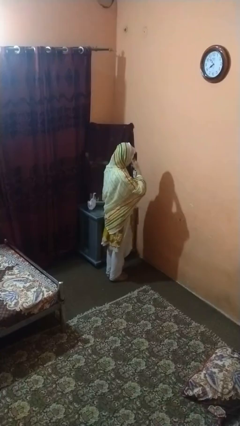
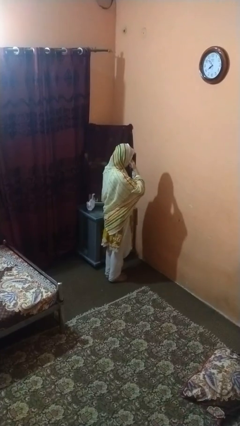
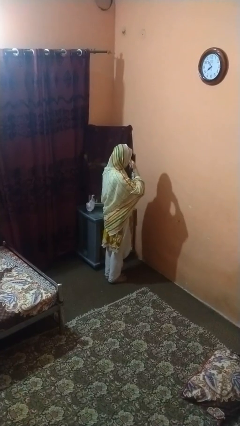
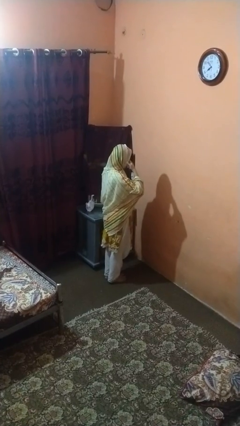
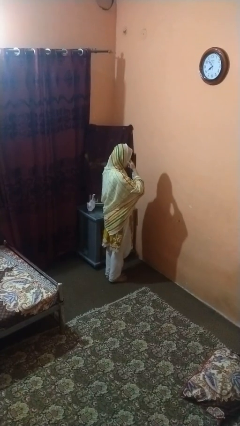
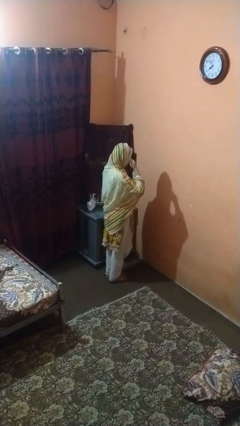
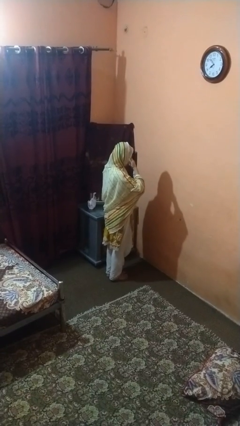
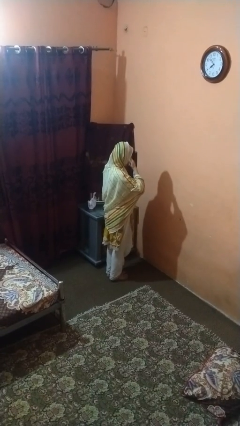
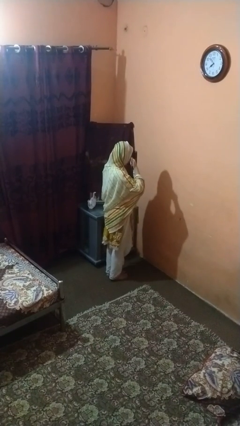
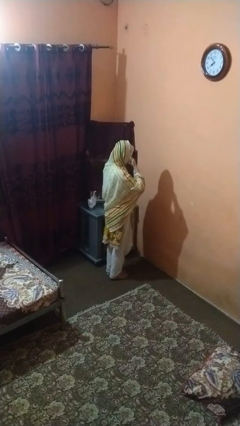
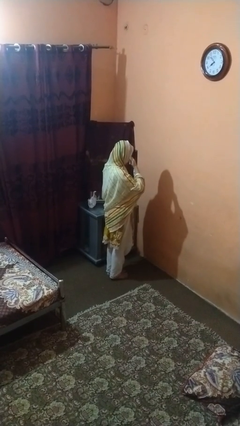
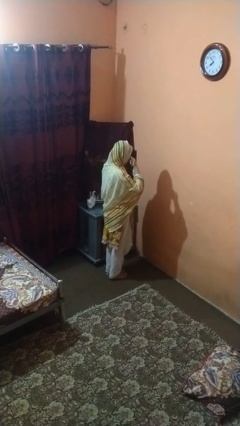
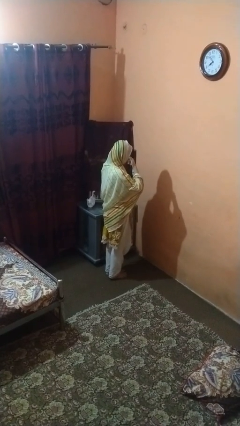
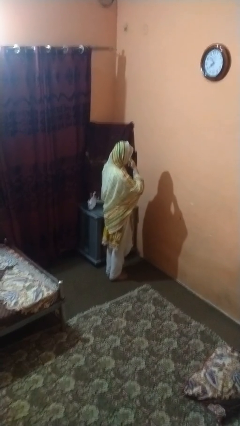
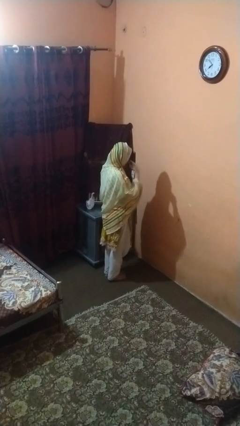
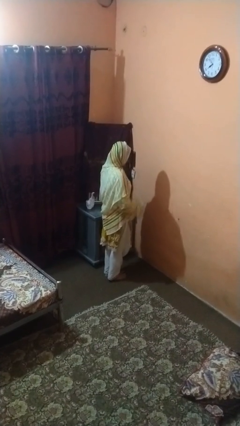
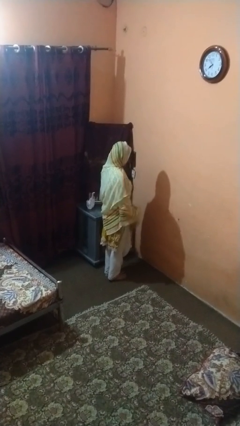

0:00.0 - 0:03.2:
person rubs eyes

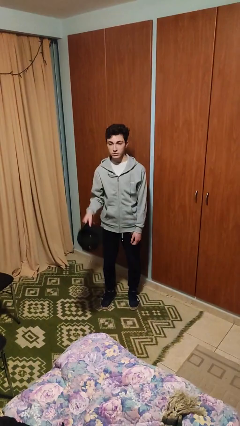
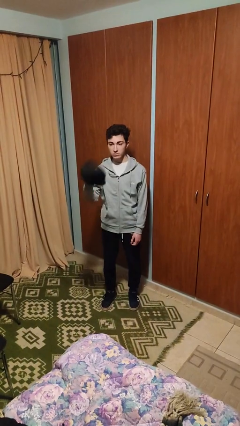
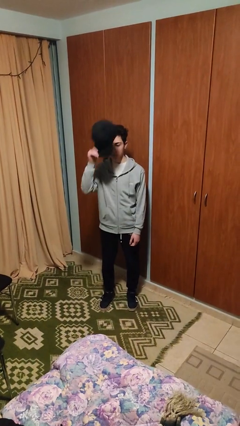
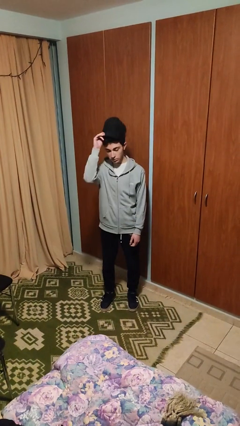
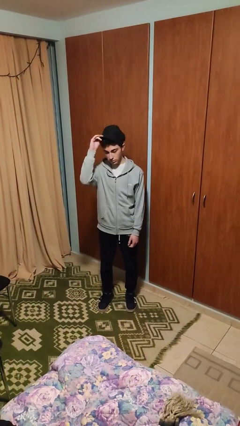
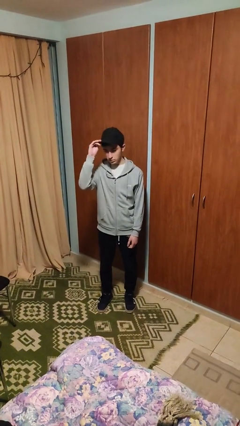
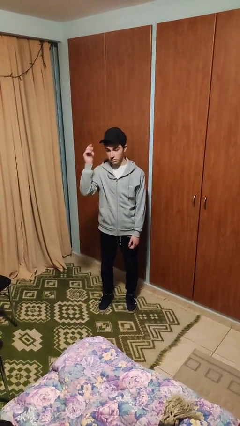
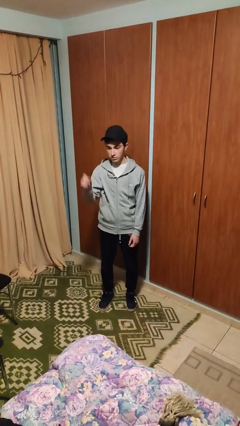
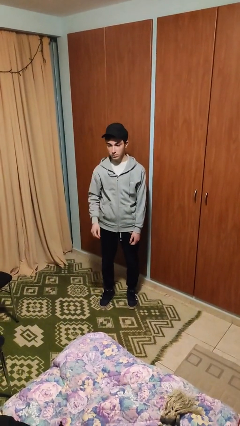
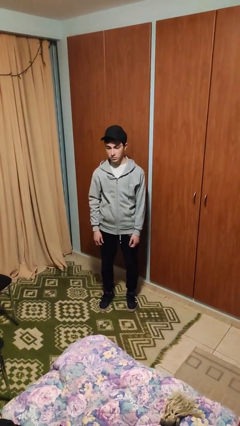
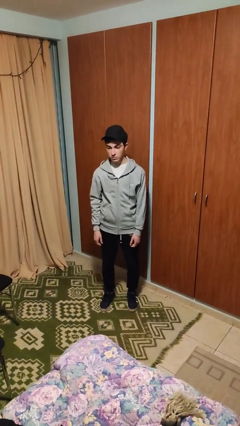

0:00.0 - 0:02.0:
person puts on hat

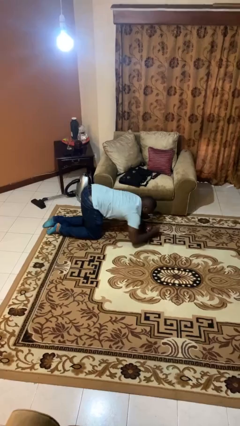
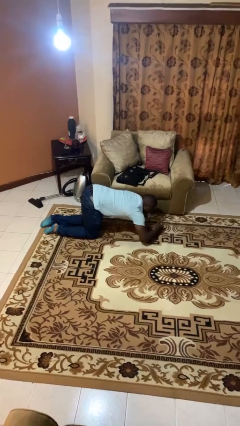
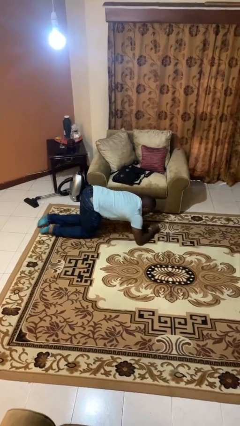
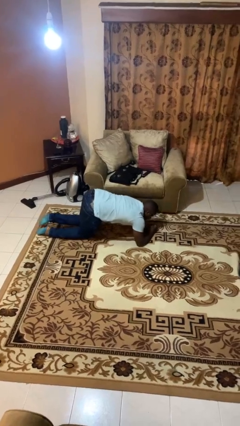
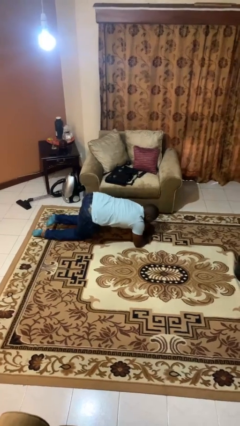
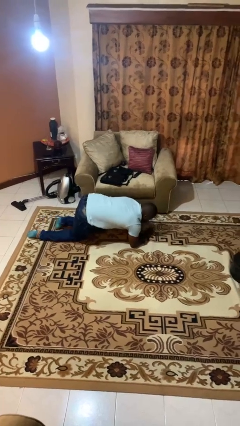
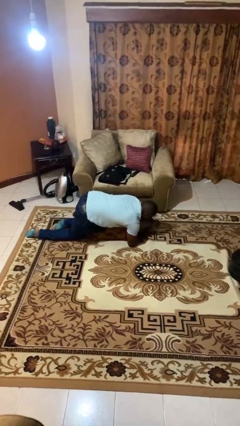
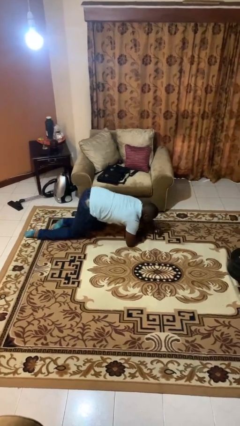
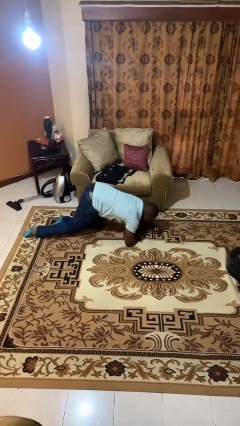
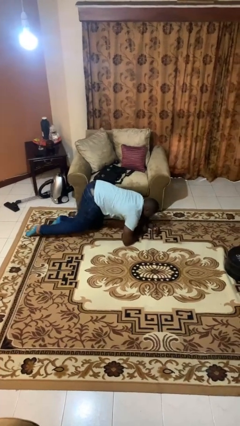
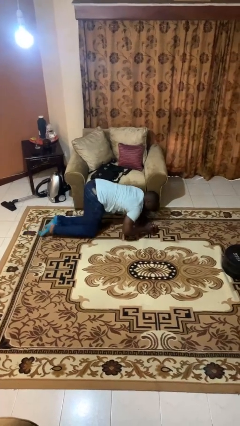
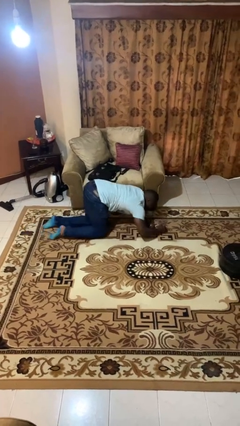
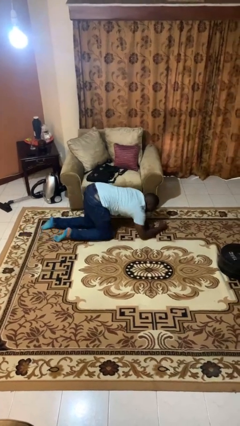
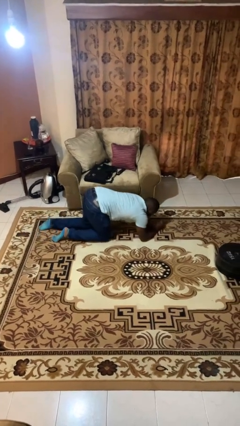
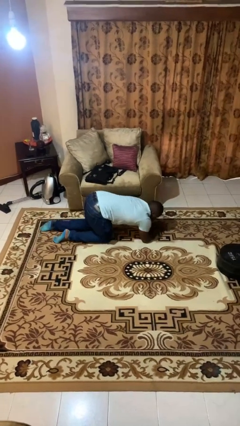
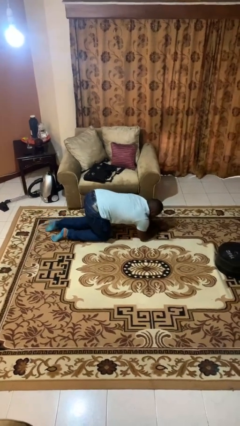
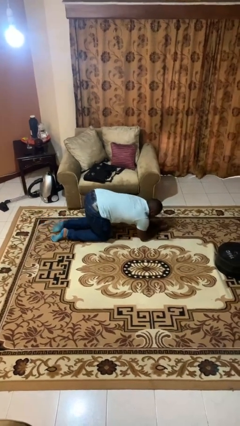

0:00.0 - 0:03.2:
person crawls

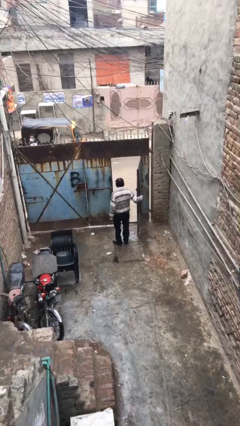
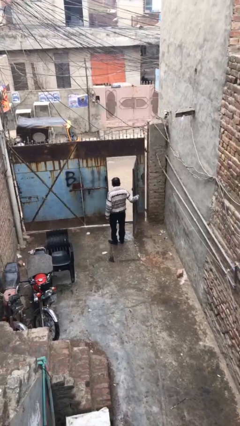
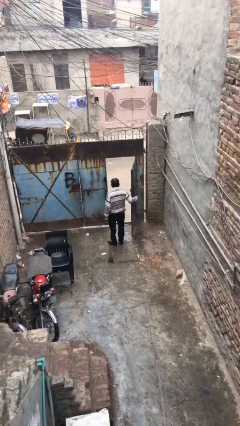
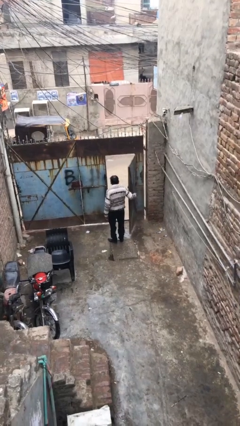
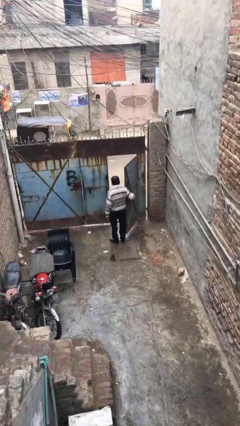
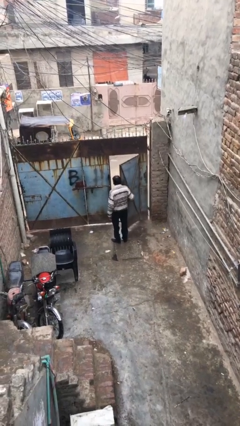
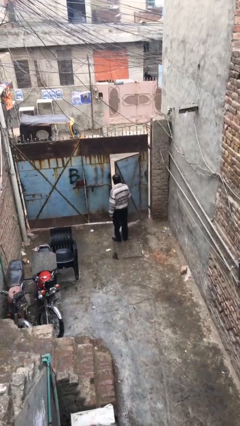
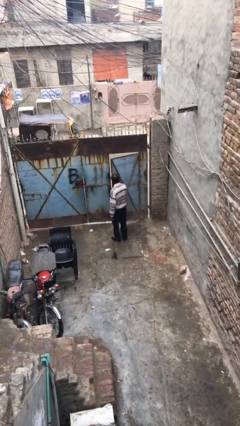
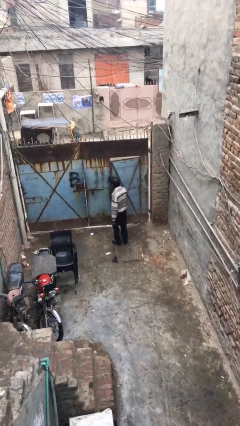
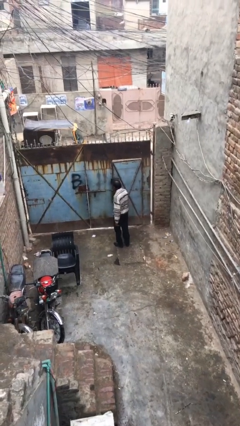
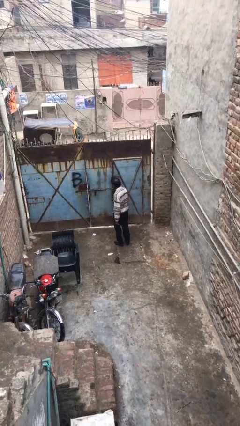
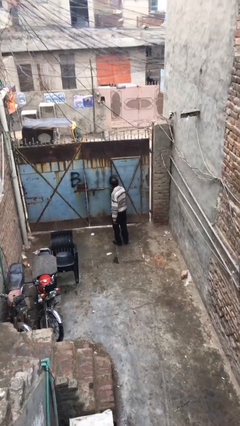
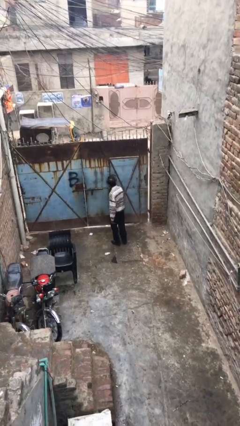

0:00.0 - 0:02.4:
person closes facility door

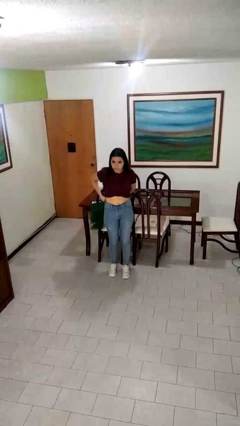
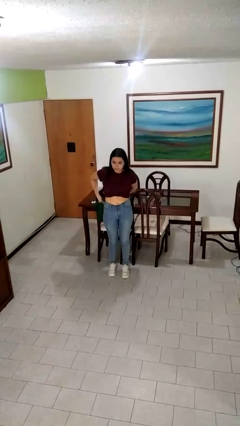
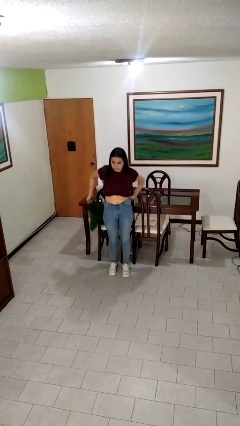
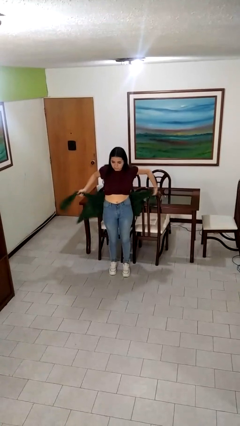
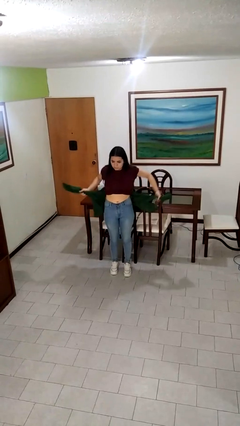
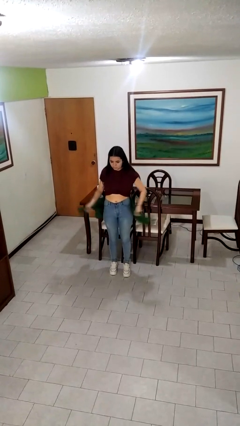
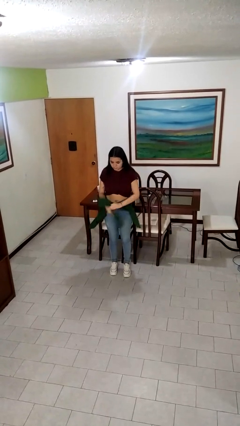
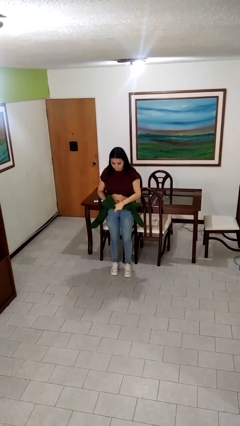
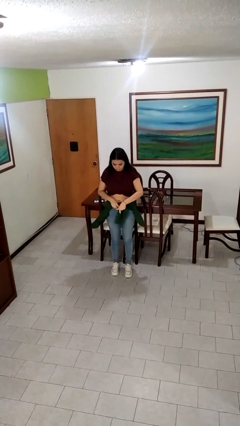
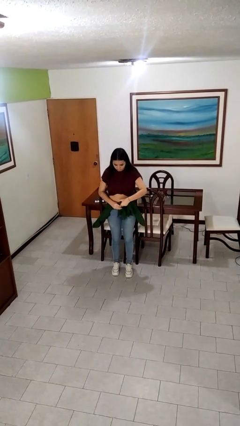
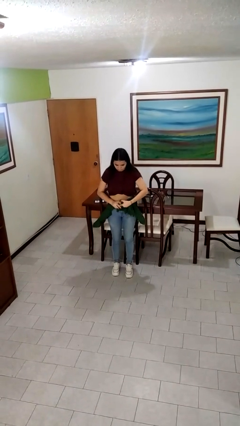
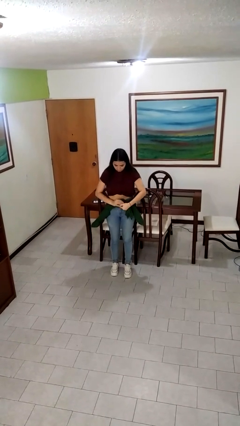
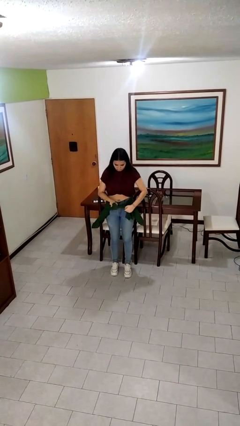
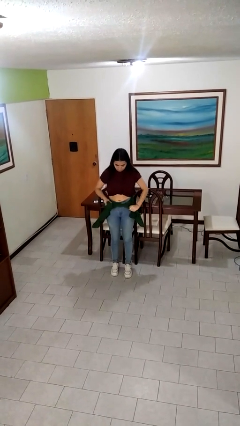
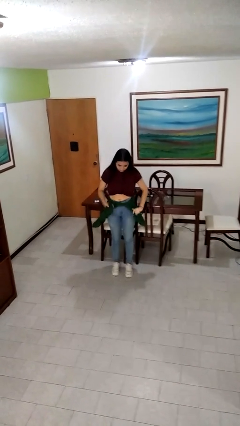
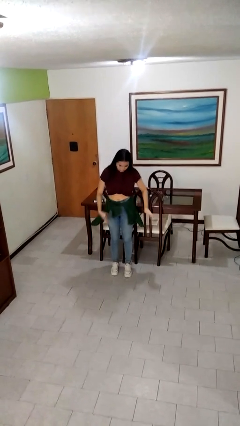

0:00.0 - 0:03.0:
person ties jacket around waist

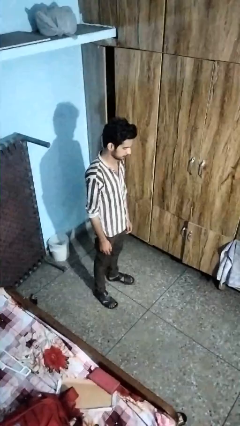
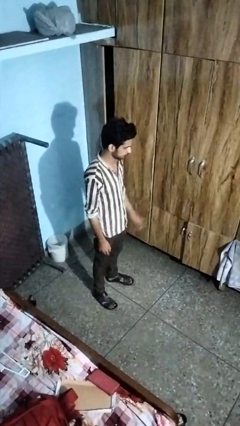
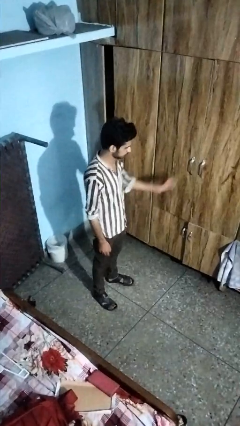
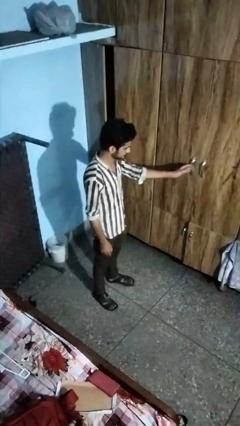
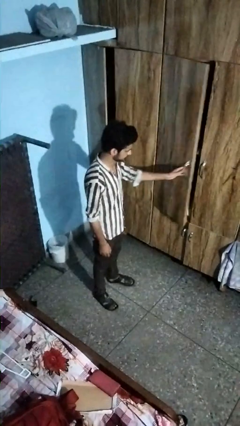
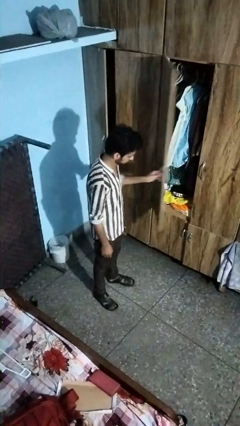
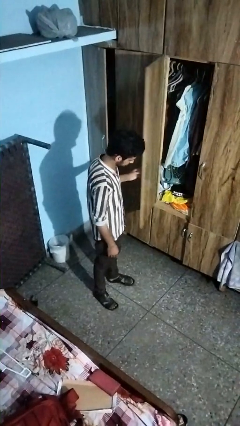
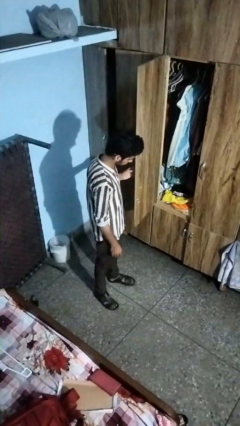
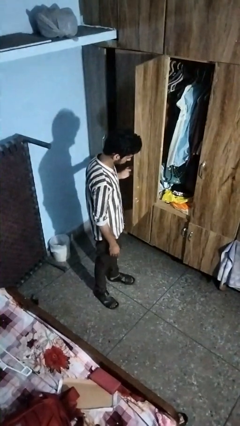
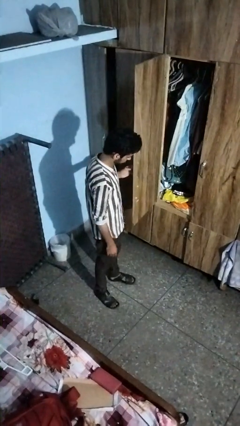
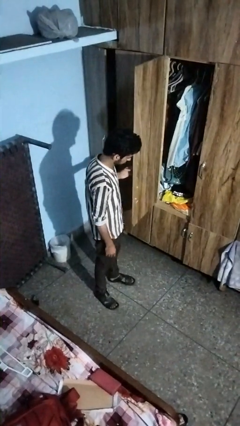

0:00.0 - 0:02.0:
person opens closet door

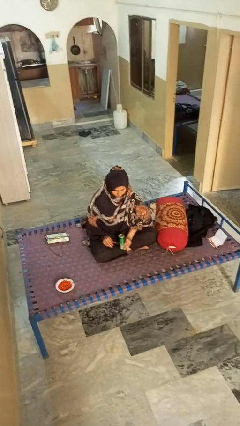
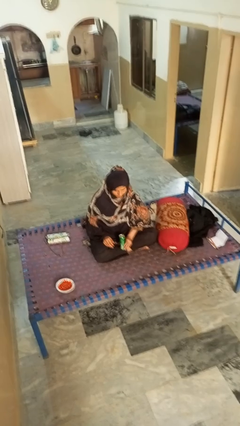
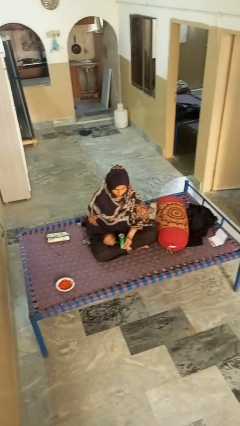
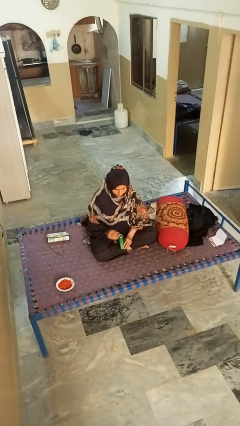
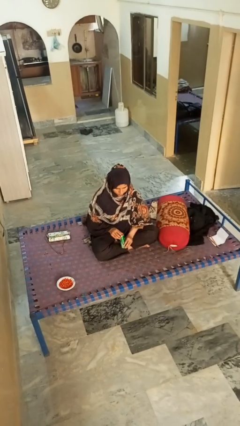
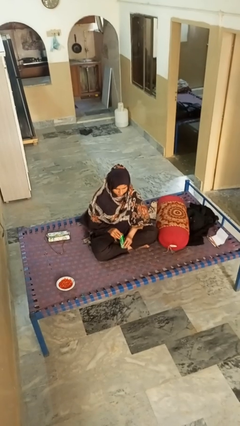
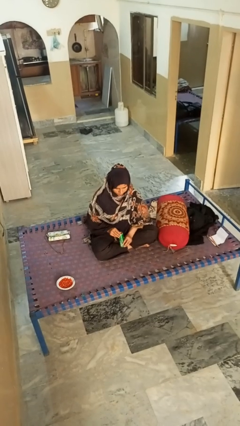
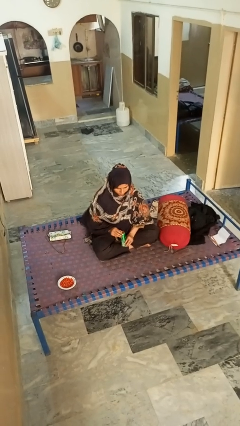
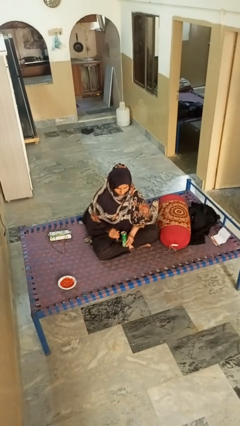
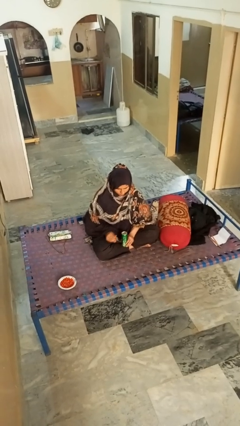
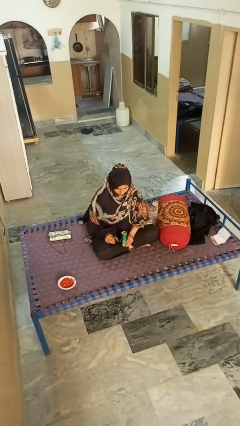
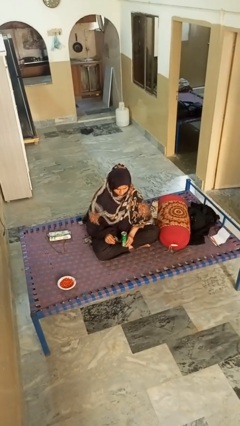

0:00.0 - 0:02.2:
person opens can with can opener
